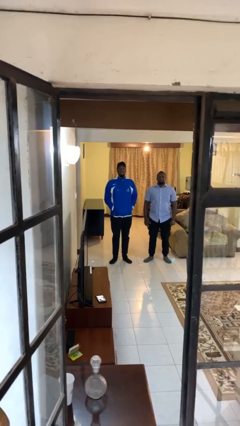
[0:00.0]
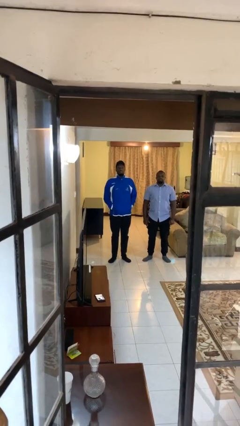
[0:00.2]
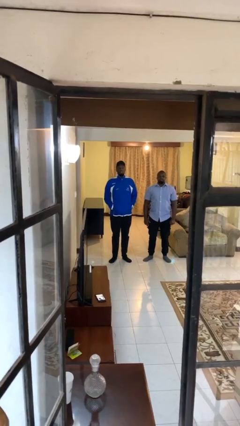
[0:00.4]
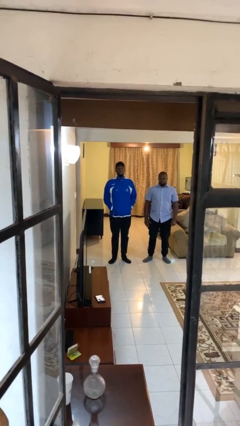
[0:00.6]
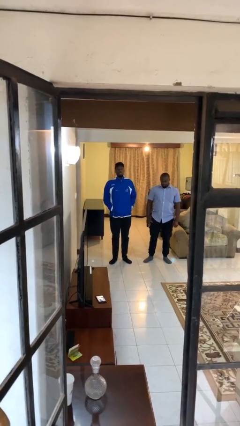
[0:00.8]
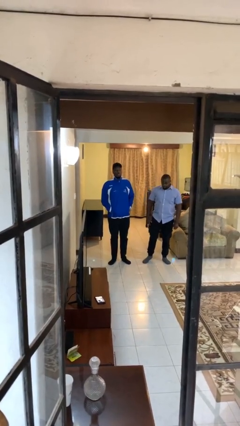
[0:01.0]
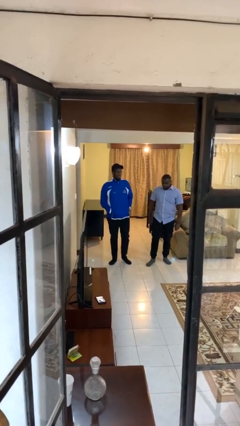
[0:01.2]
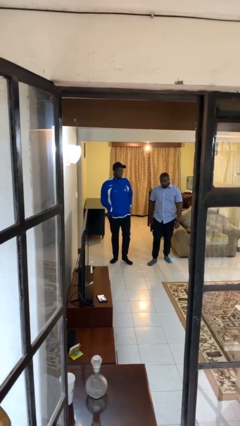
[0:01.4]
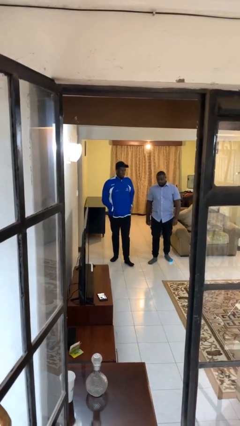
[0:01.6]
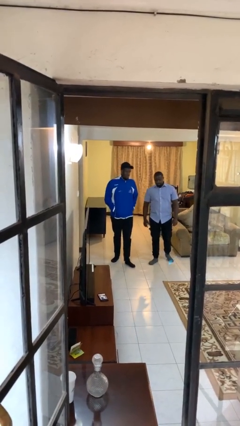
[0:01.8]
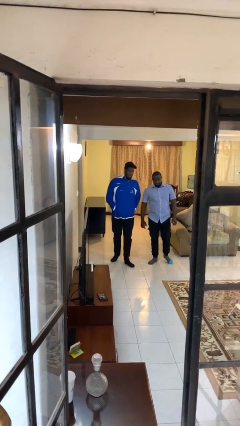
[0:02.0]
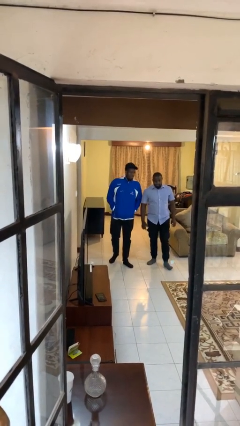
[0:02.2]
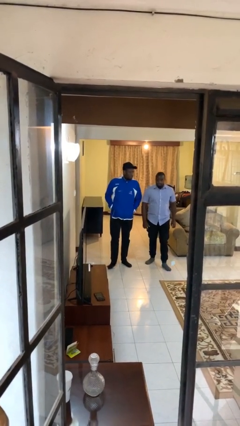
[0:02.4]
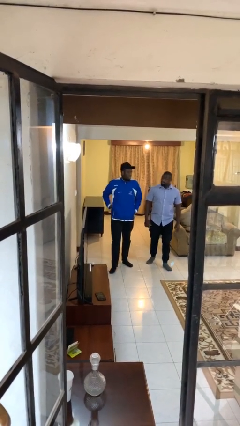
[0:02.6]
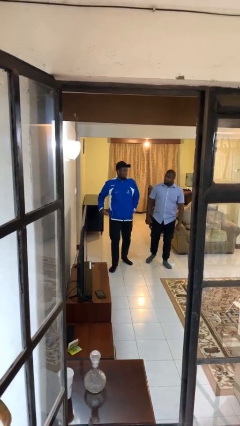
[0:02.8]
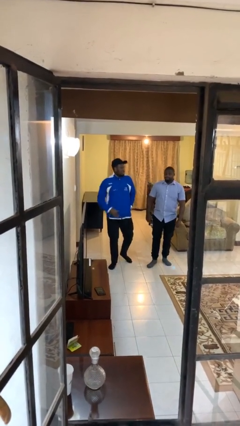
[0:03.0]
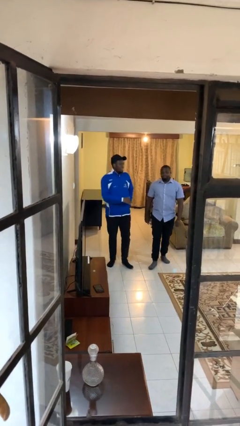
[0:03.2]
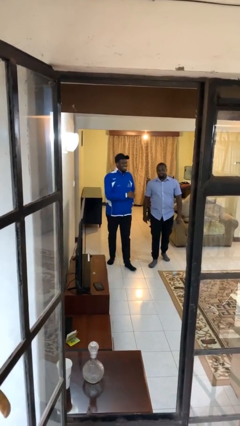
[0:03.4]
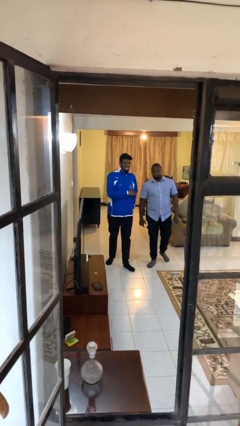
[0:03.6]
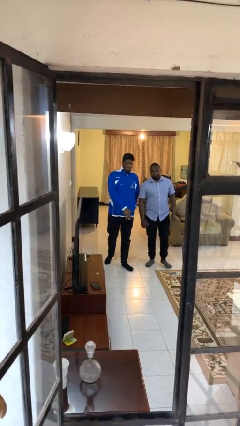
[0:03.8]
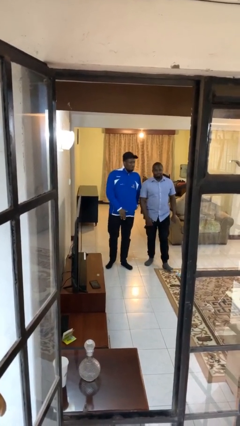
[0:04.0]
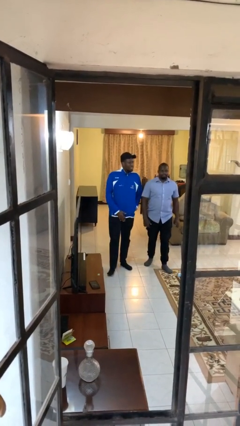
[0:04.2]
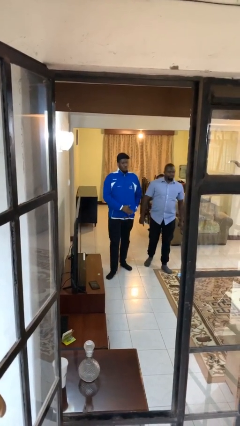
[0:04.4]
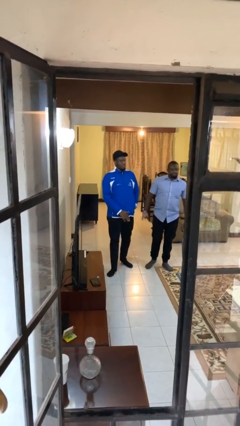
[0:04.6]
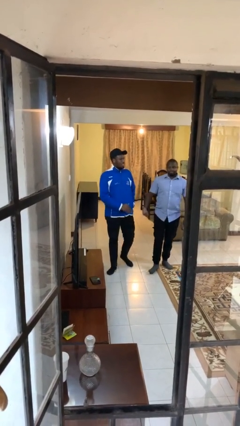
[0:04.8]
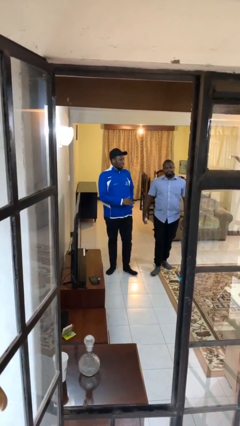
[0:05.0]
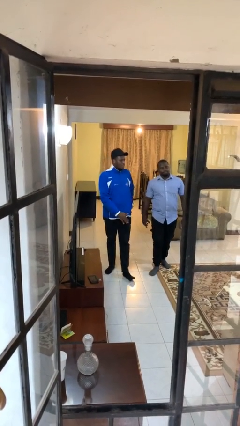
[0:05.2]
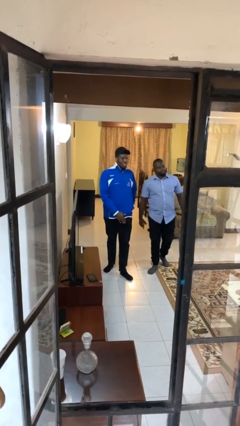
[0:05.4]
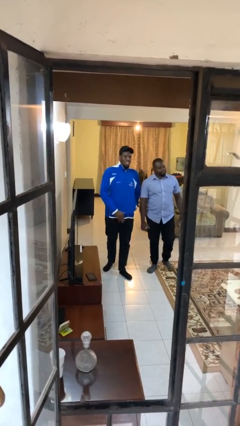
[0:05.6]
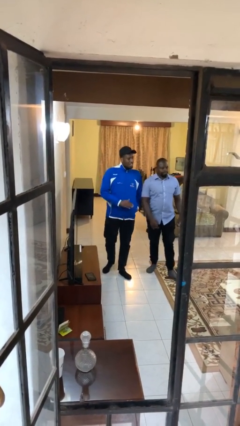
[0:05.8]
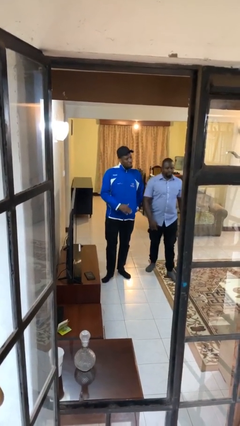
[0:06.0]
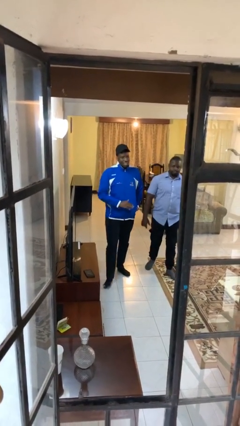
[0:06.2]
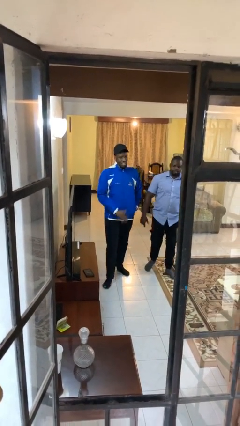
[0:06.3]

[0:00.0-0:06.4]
person talks to person

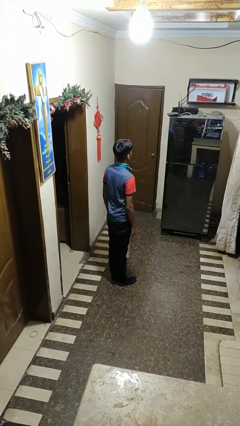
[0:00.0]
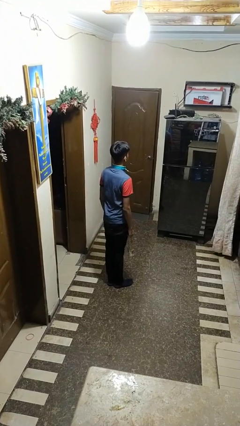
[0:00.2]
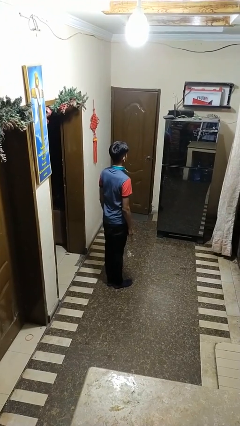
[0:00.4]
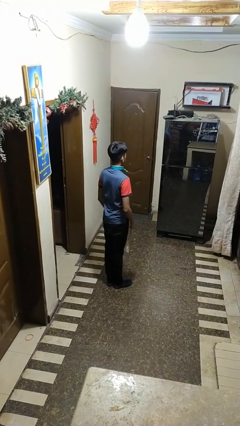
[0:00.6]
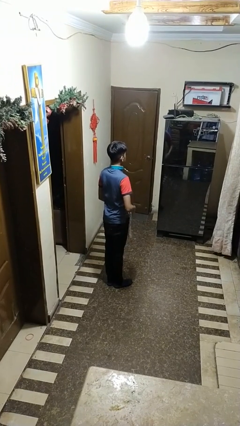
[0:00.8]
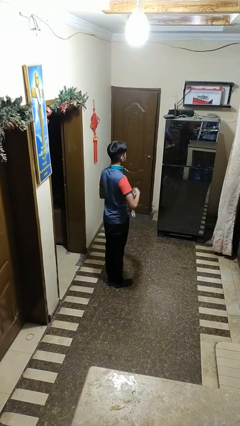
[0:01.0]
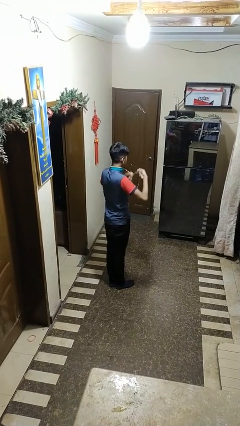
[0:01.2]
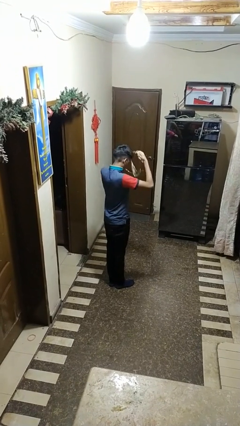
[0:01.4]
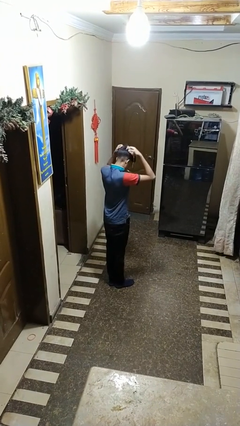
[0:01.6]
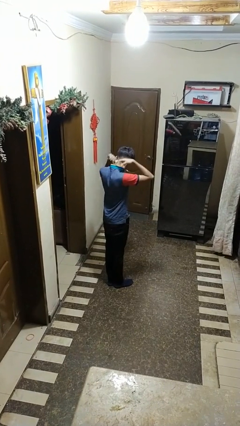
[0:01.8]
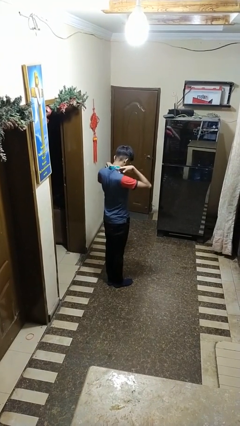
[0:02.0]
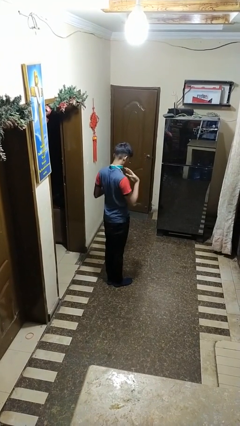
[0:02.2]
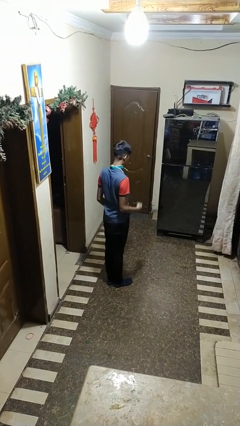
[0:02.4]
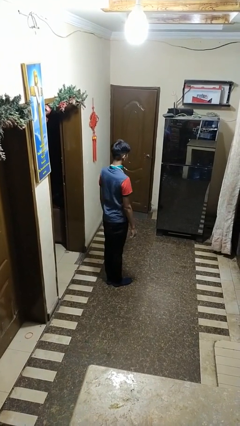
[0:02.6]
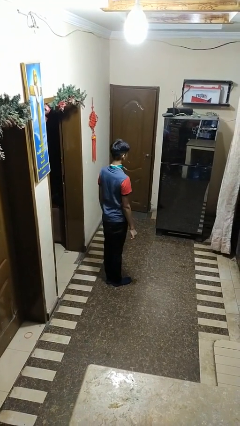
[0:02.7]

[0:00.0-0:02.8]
person puts on necklace

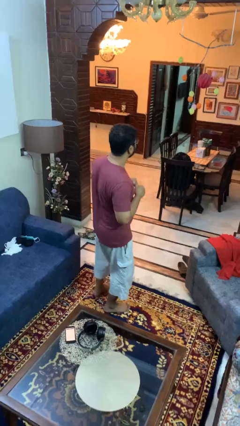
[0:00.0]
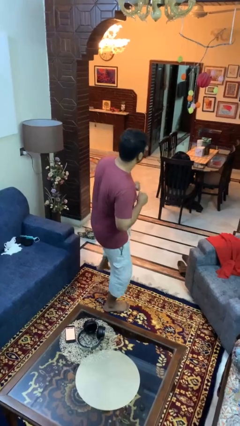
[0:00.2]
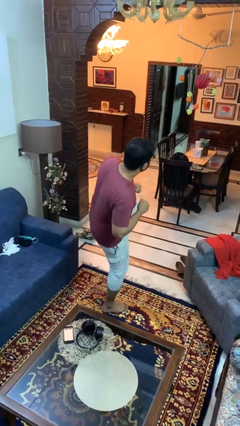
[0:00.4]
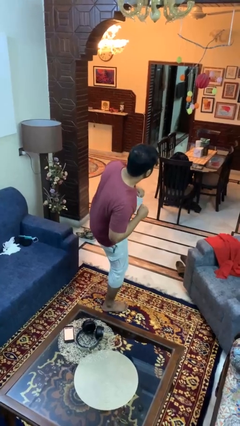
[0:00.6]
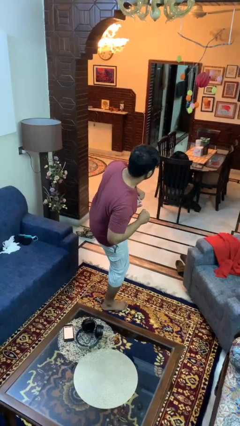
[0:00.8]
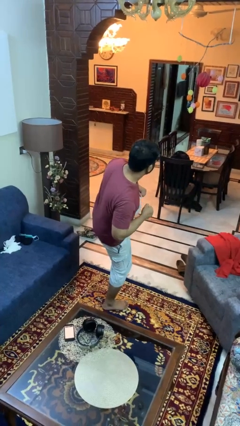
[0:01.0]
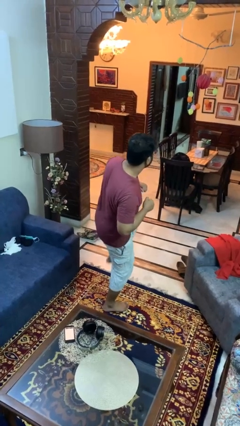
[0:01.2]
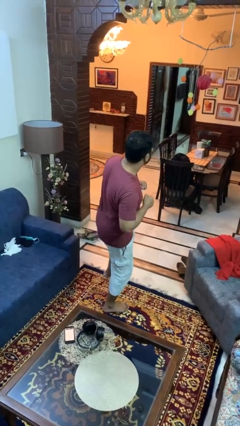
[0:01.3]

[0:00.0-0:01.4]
person karate kicks

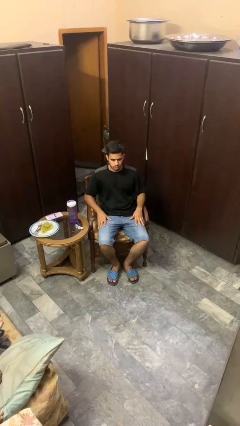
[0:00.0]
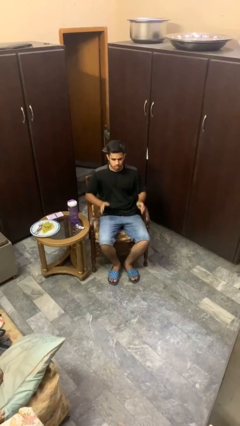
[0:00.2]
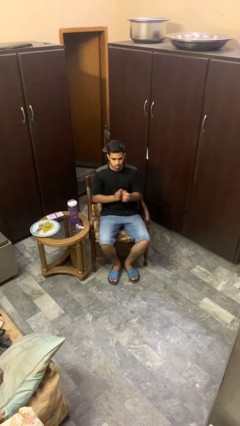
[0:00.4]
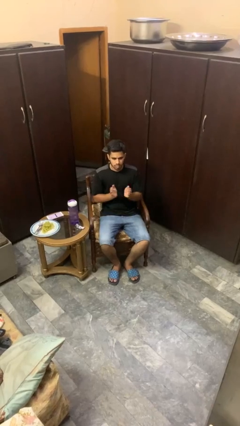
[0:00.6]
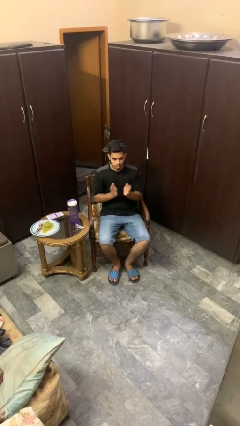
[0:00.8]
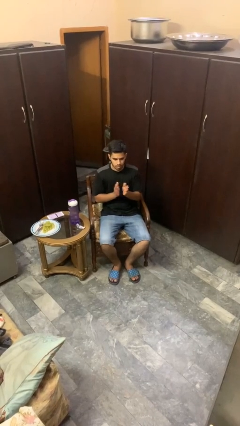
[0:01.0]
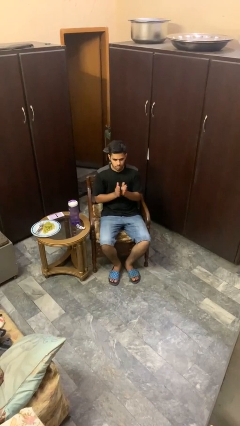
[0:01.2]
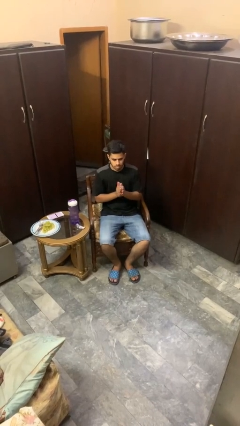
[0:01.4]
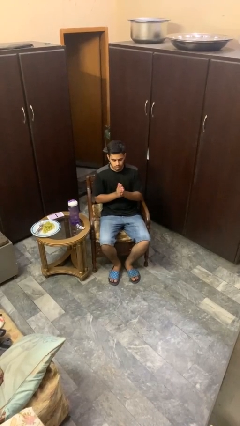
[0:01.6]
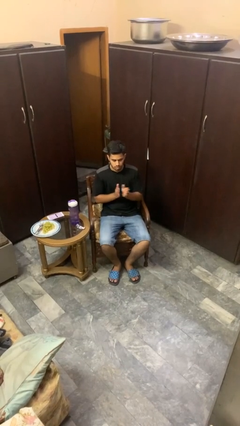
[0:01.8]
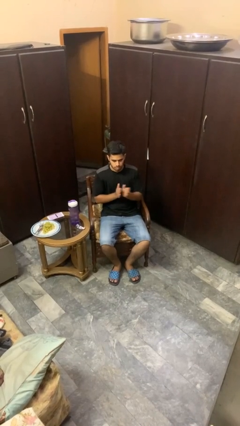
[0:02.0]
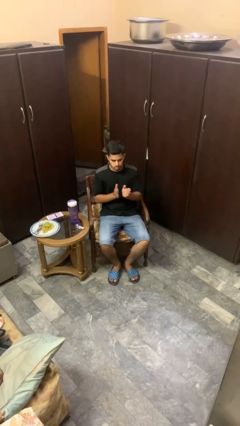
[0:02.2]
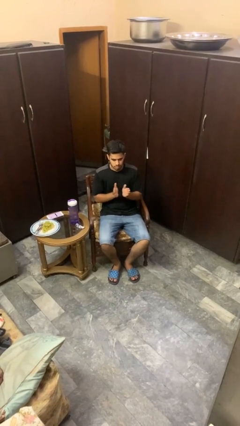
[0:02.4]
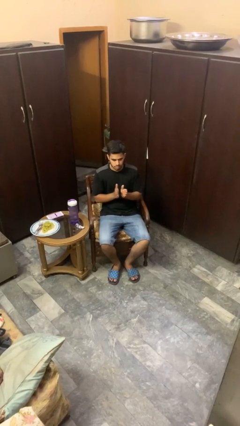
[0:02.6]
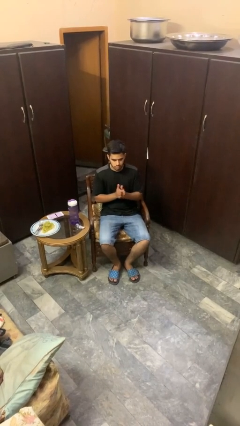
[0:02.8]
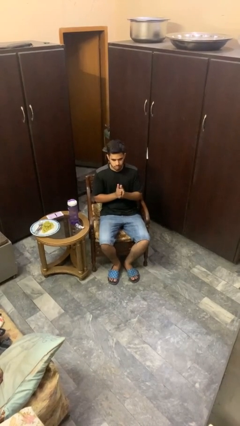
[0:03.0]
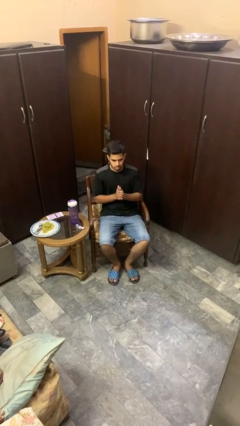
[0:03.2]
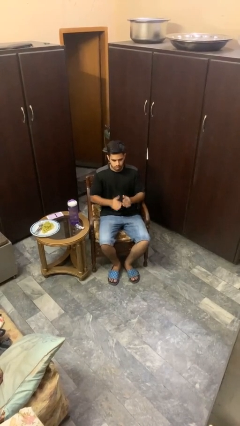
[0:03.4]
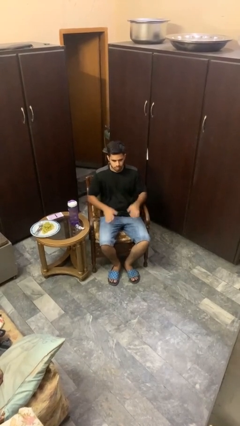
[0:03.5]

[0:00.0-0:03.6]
person claps hands

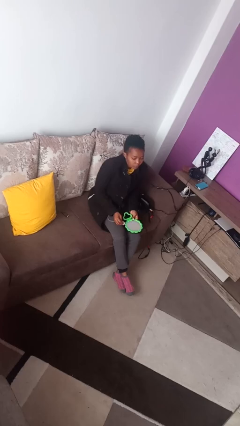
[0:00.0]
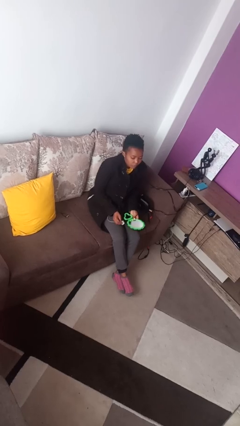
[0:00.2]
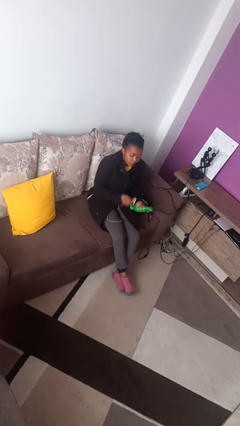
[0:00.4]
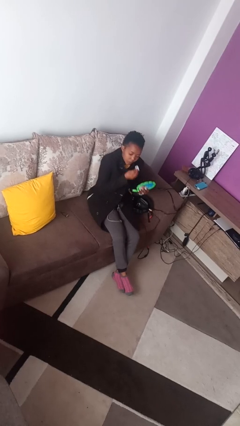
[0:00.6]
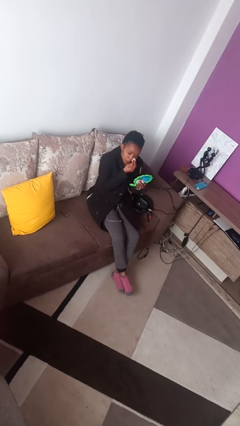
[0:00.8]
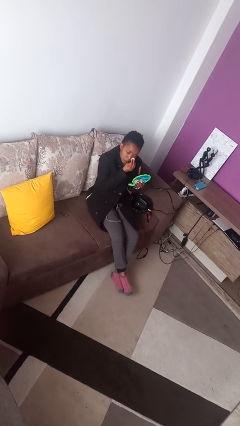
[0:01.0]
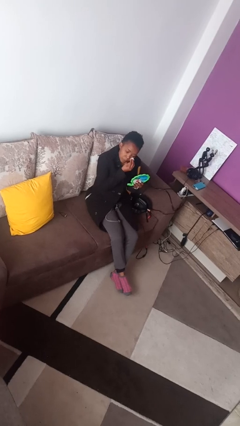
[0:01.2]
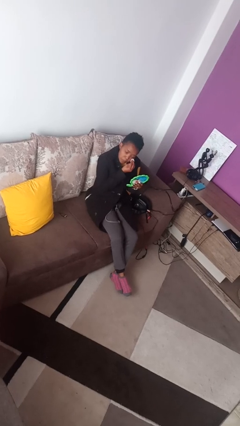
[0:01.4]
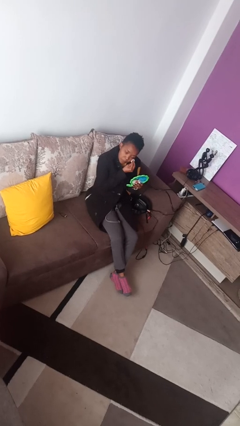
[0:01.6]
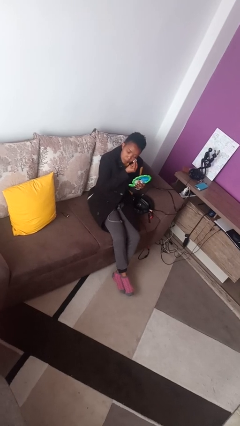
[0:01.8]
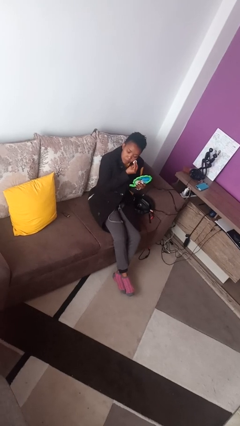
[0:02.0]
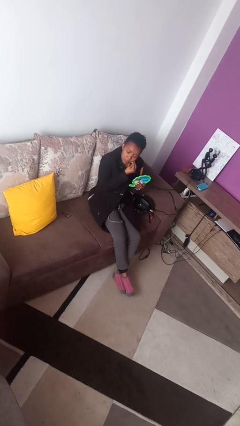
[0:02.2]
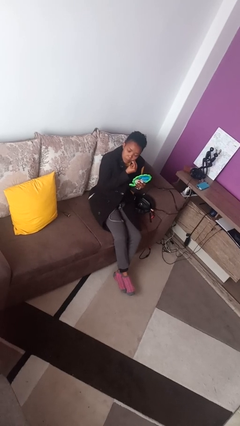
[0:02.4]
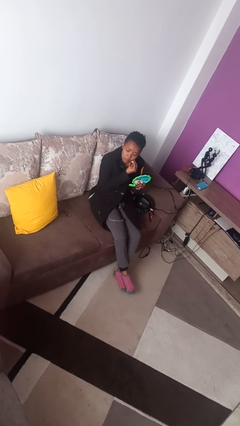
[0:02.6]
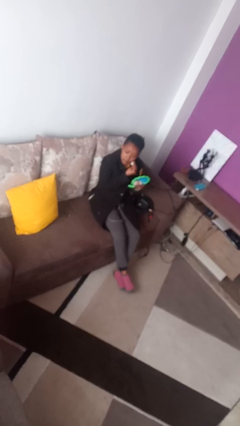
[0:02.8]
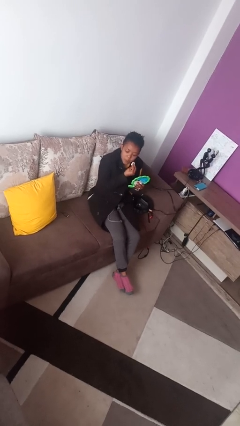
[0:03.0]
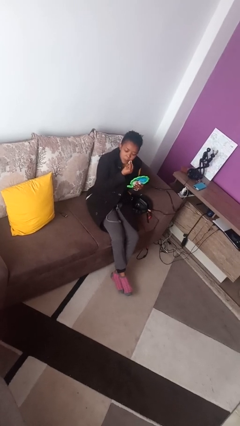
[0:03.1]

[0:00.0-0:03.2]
person applies foundation makeup

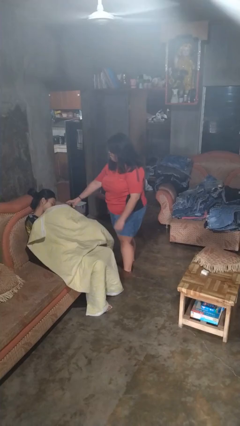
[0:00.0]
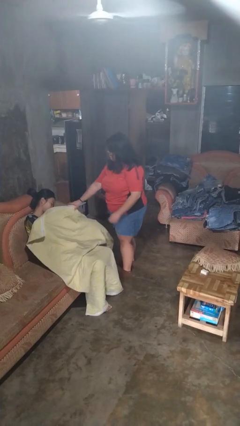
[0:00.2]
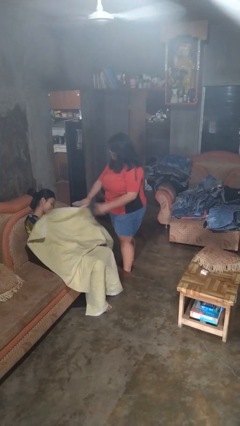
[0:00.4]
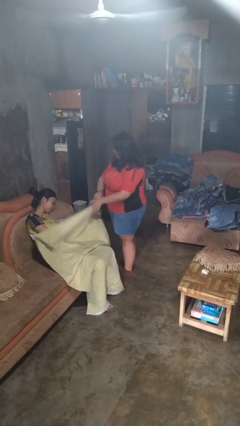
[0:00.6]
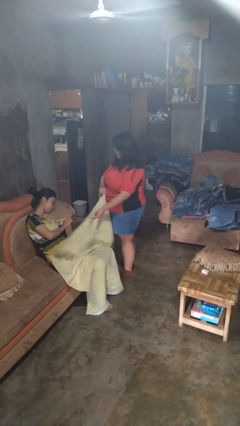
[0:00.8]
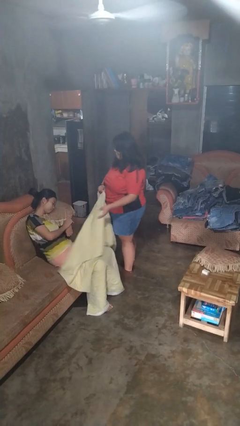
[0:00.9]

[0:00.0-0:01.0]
person uncovers friend with blanket
